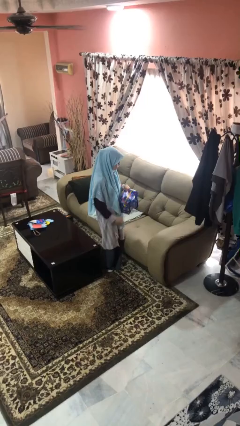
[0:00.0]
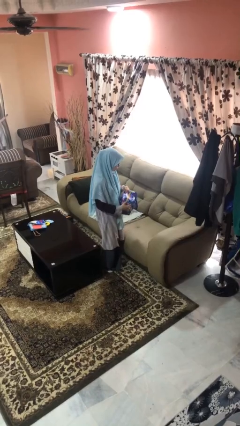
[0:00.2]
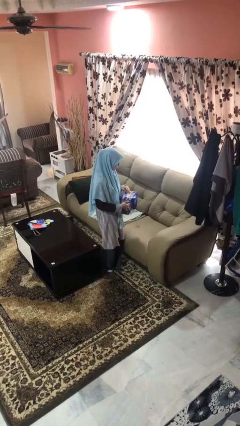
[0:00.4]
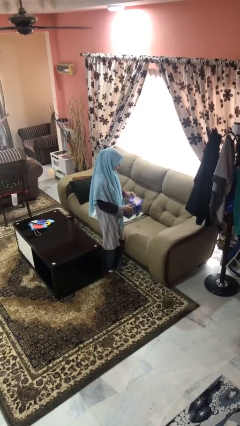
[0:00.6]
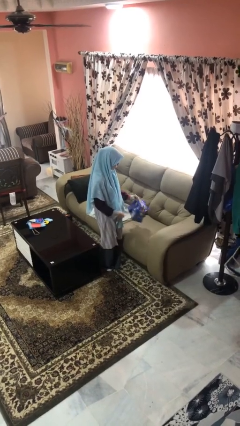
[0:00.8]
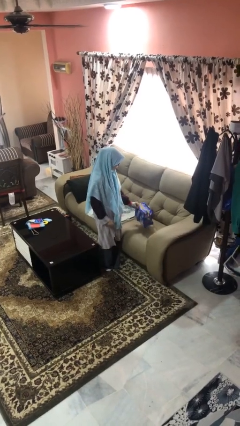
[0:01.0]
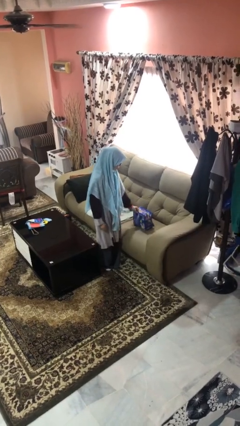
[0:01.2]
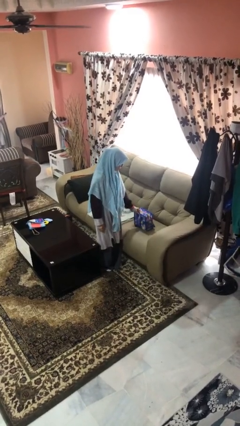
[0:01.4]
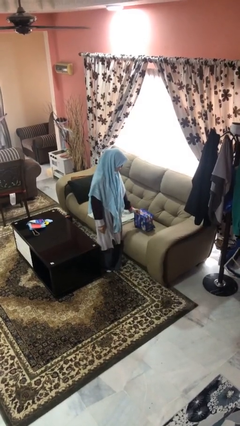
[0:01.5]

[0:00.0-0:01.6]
person puts down object on couch

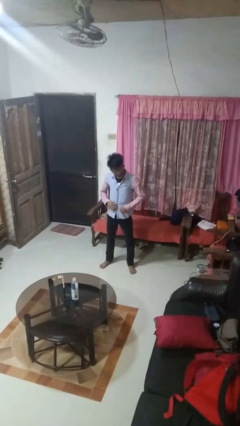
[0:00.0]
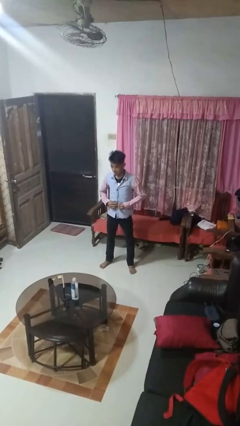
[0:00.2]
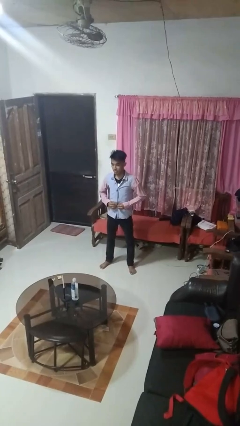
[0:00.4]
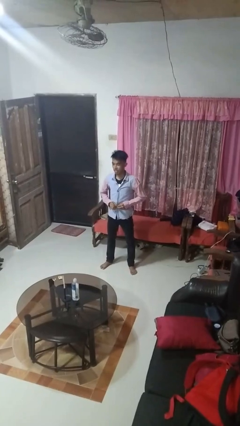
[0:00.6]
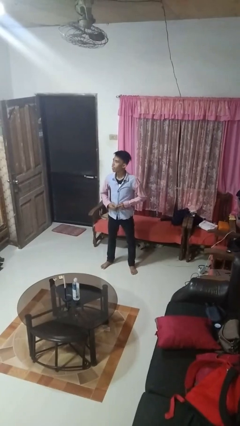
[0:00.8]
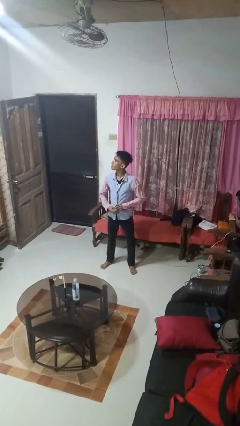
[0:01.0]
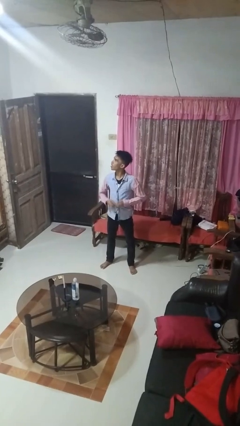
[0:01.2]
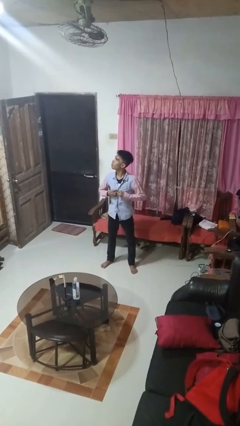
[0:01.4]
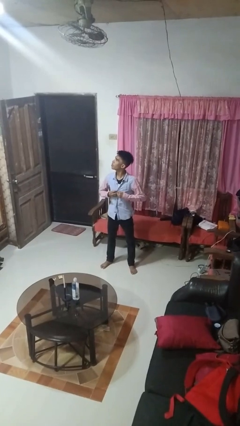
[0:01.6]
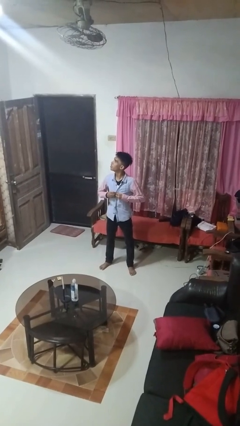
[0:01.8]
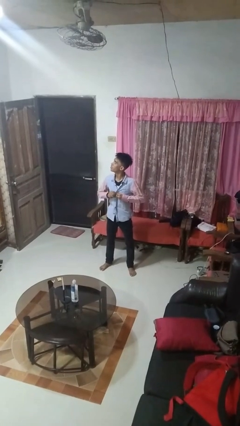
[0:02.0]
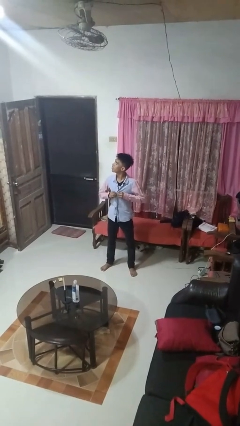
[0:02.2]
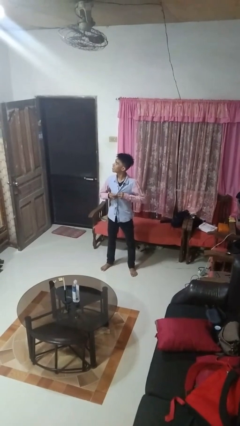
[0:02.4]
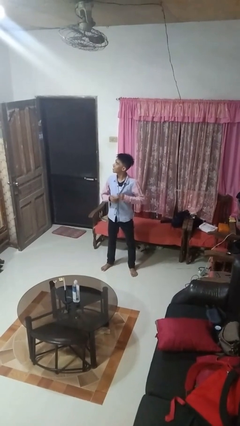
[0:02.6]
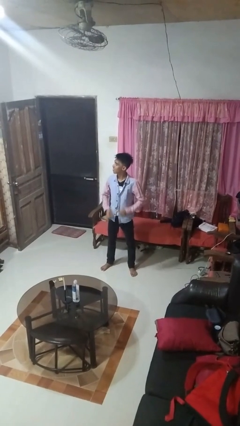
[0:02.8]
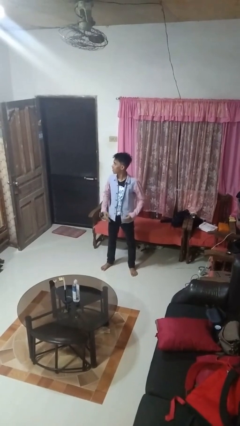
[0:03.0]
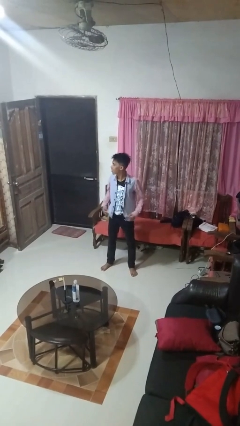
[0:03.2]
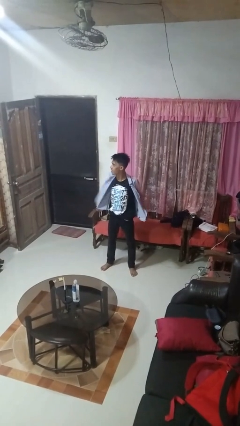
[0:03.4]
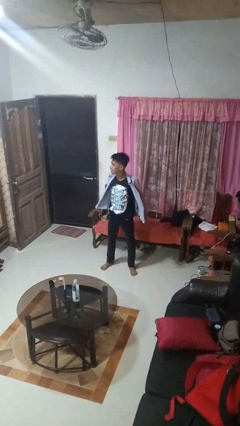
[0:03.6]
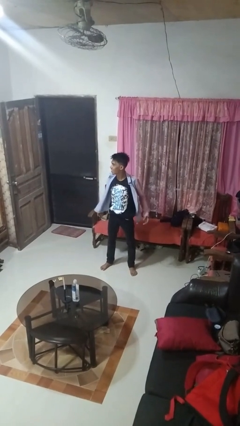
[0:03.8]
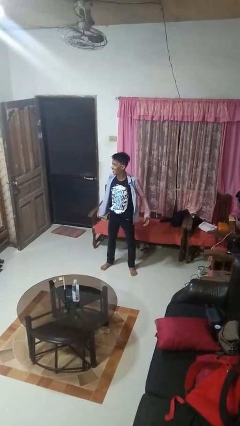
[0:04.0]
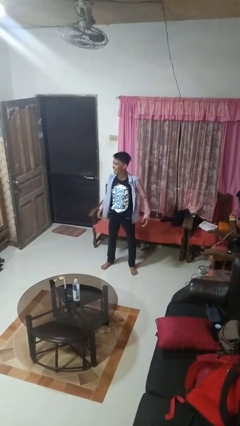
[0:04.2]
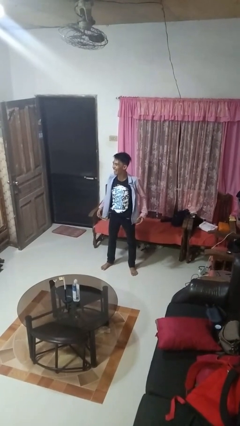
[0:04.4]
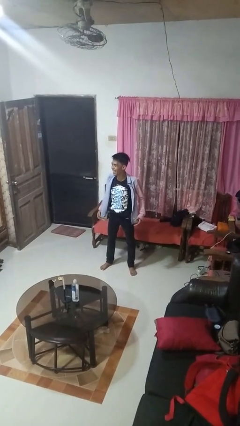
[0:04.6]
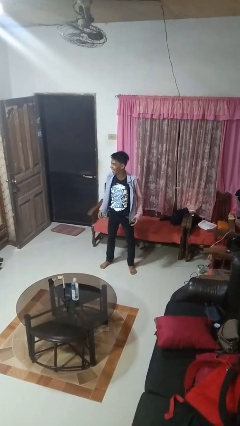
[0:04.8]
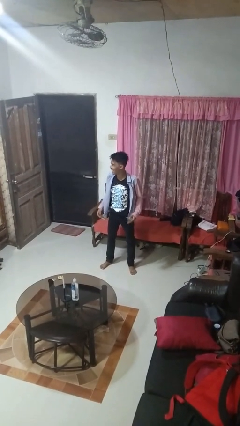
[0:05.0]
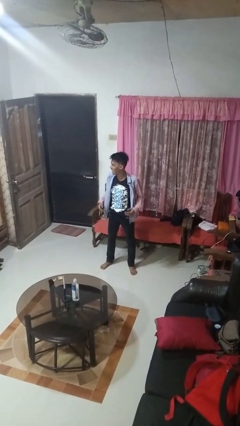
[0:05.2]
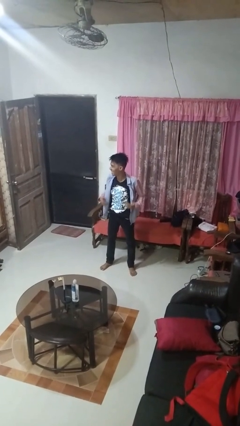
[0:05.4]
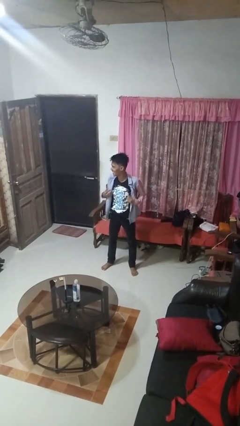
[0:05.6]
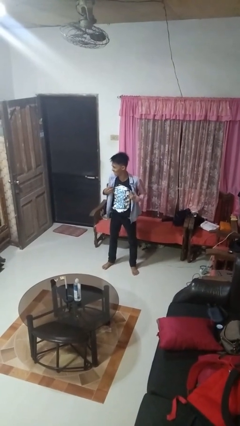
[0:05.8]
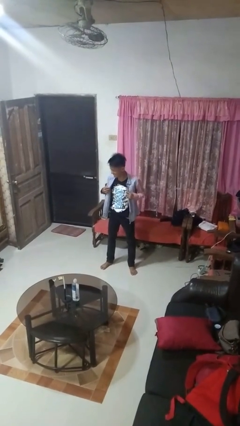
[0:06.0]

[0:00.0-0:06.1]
person unbuttons shirt

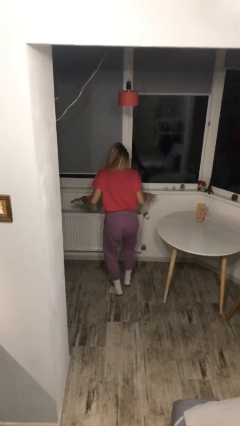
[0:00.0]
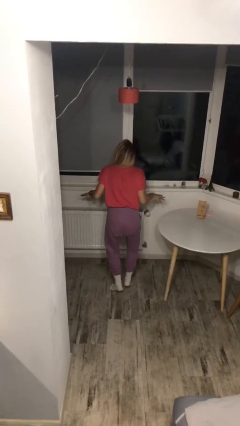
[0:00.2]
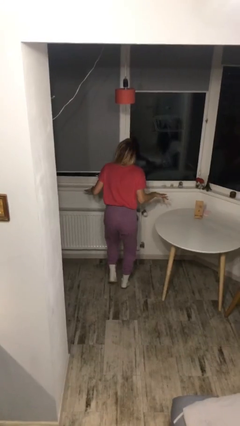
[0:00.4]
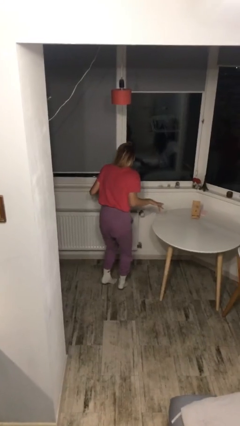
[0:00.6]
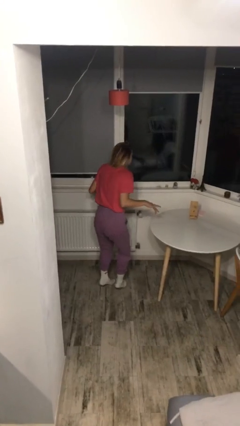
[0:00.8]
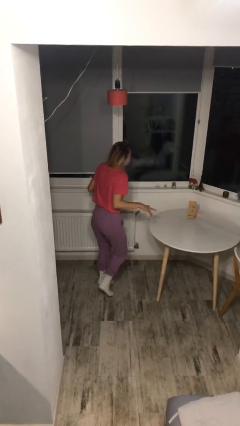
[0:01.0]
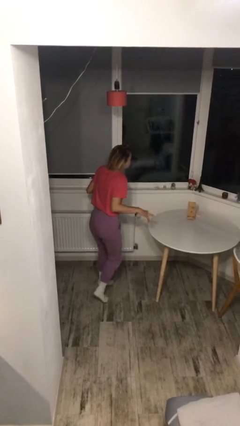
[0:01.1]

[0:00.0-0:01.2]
person walks tiptoe

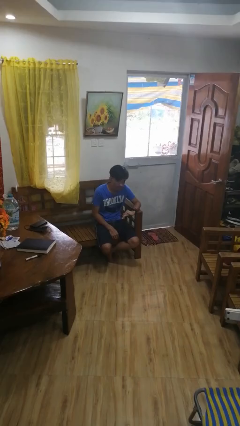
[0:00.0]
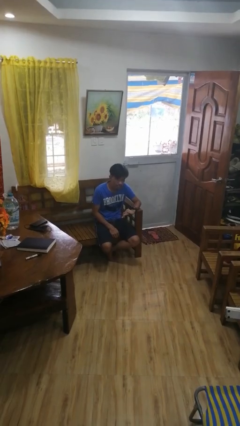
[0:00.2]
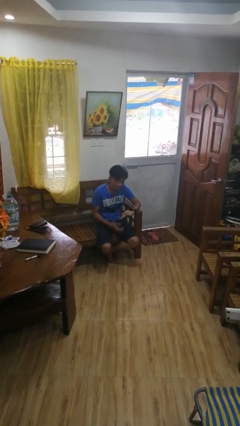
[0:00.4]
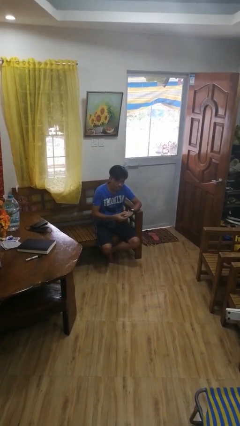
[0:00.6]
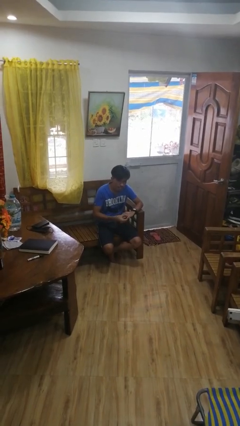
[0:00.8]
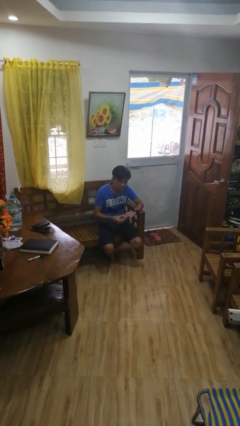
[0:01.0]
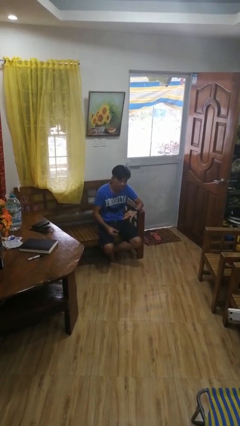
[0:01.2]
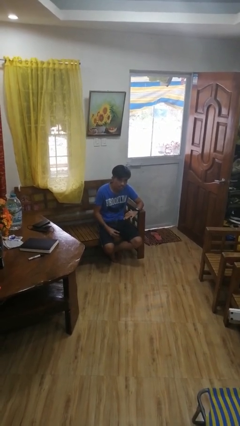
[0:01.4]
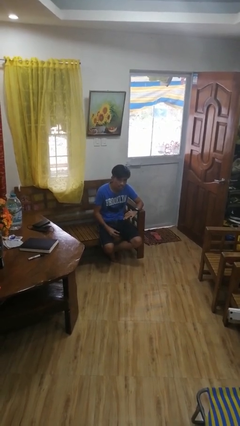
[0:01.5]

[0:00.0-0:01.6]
person takes off ring

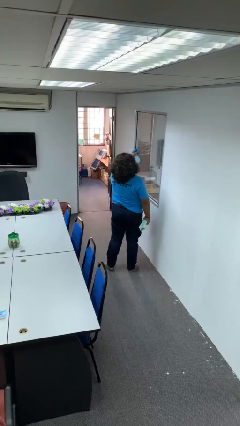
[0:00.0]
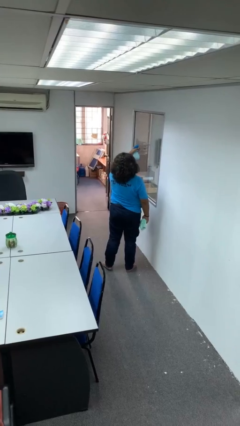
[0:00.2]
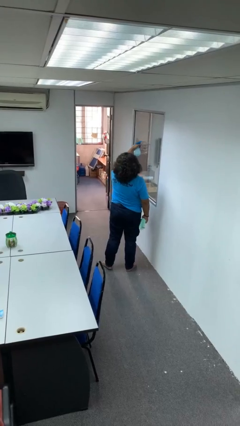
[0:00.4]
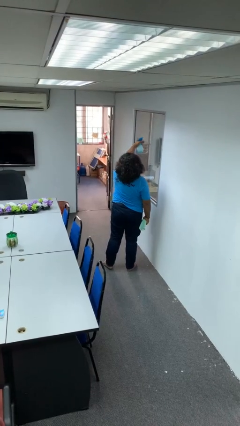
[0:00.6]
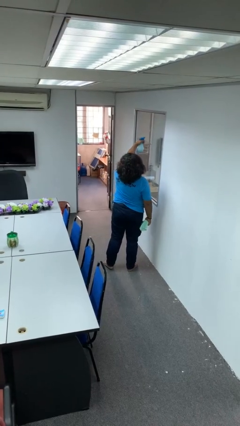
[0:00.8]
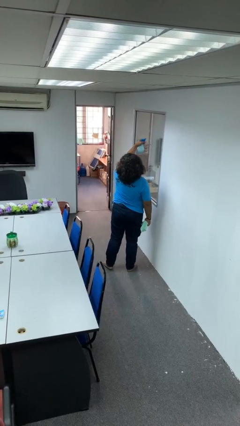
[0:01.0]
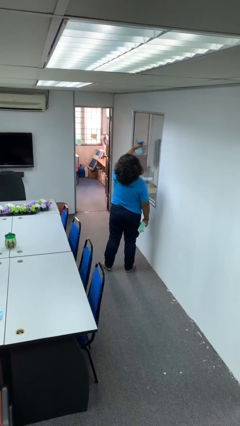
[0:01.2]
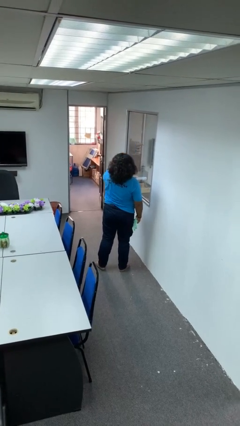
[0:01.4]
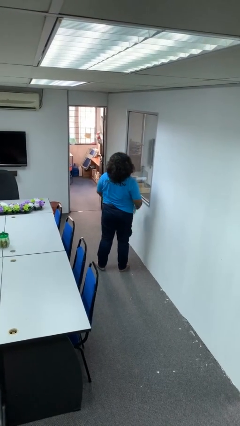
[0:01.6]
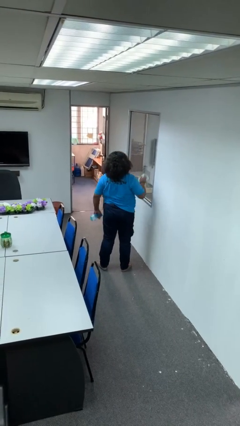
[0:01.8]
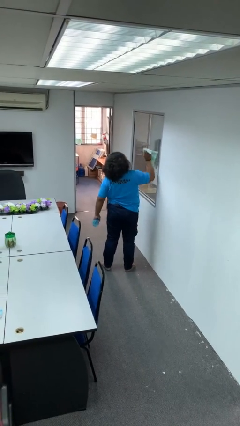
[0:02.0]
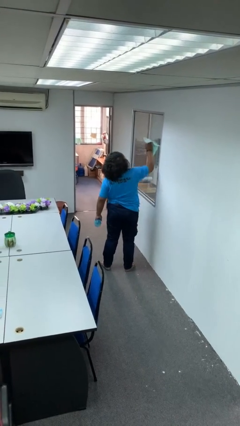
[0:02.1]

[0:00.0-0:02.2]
person sprays from bottle

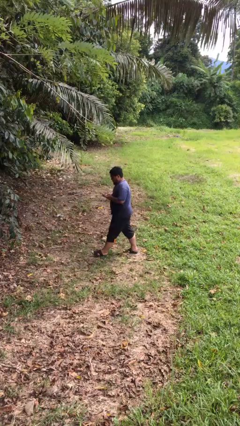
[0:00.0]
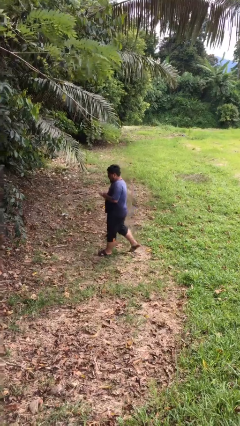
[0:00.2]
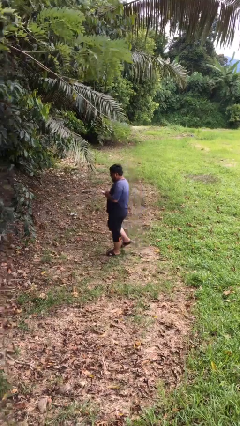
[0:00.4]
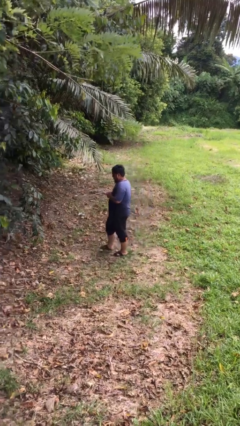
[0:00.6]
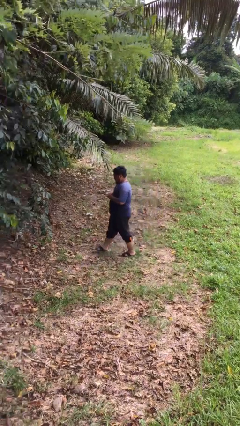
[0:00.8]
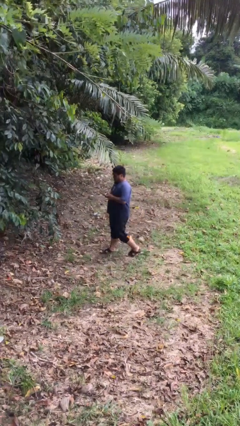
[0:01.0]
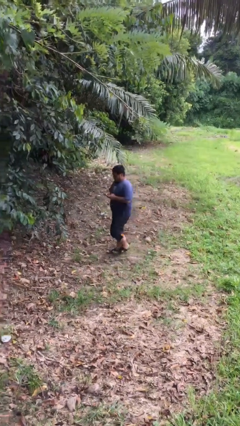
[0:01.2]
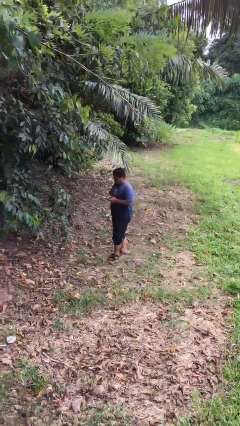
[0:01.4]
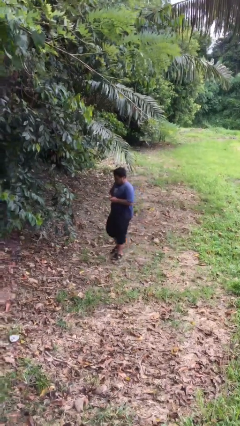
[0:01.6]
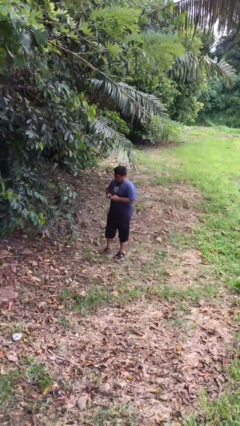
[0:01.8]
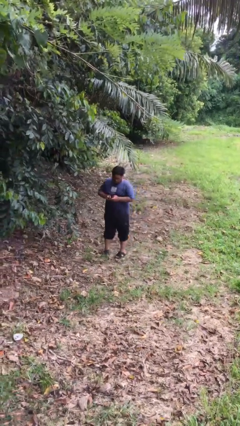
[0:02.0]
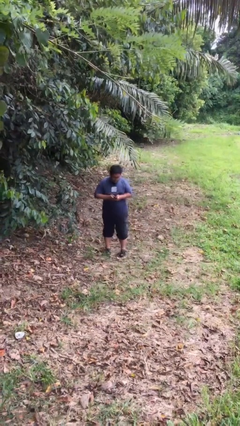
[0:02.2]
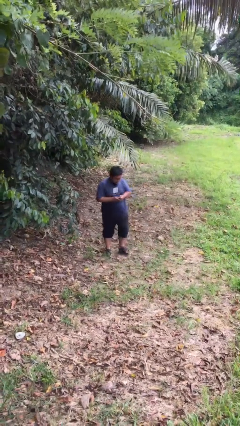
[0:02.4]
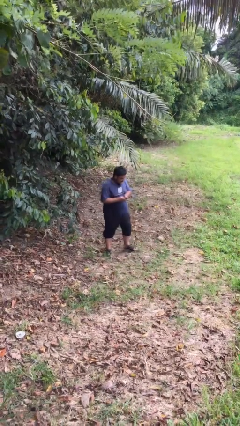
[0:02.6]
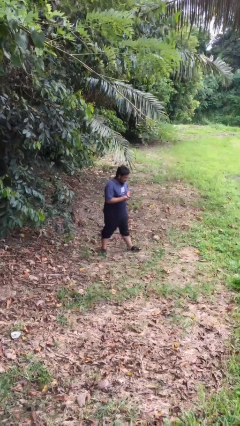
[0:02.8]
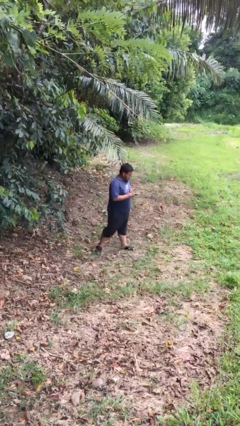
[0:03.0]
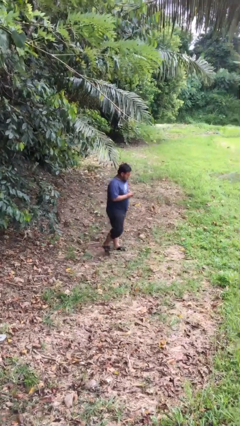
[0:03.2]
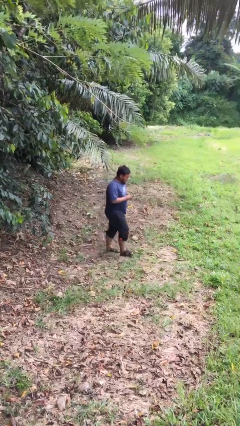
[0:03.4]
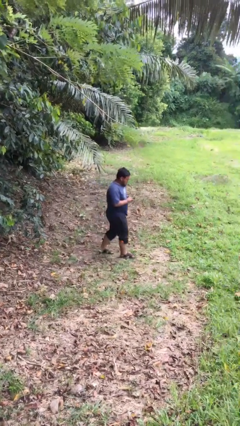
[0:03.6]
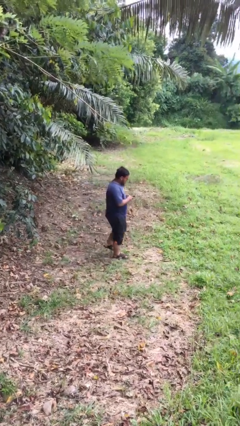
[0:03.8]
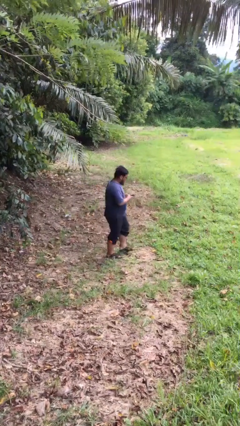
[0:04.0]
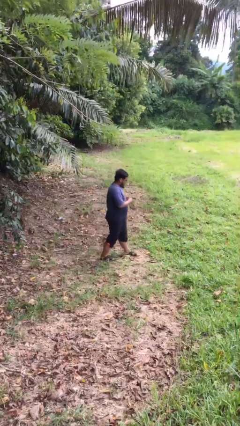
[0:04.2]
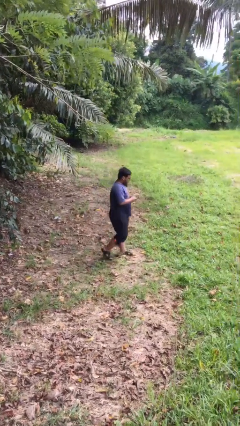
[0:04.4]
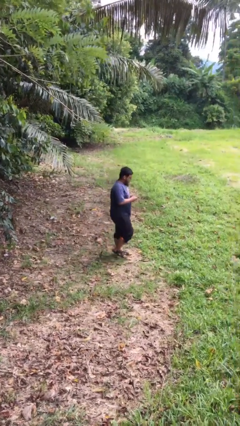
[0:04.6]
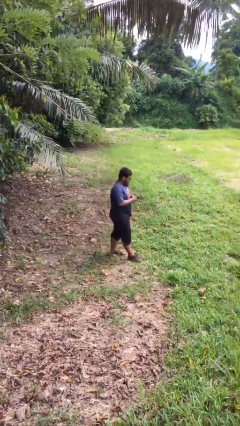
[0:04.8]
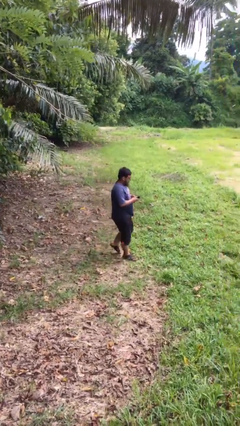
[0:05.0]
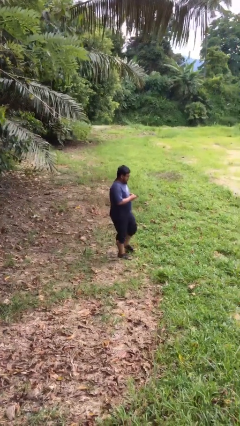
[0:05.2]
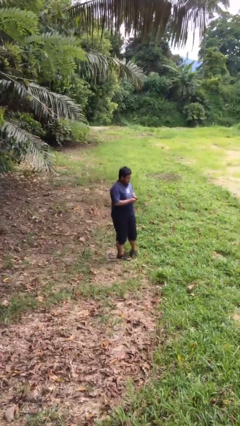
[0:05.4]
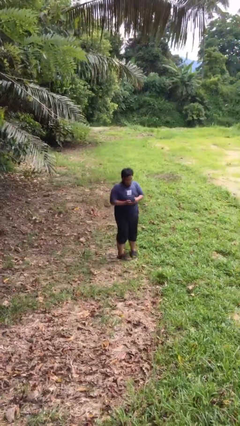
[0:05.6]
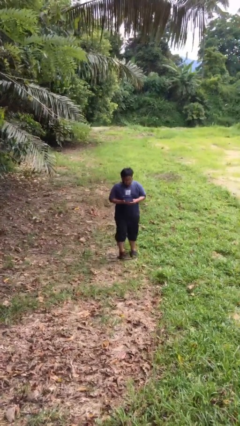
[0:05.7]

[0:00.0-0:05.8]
person texts on phone
